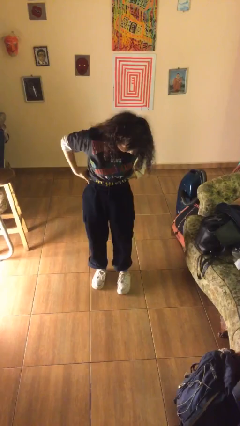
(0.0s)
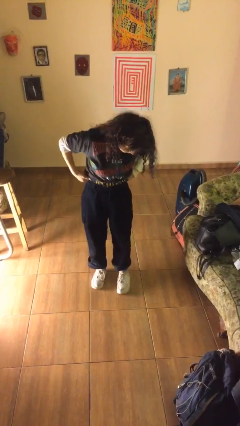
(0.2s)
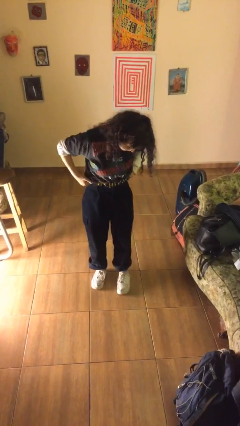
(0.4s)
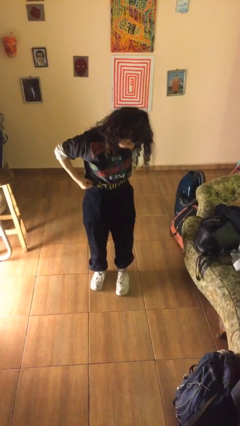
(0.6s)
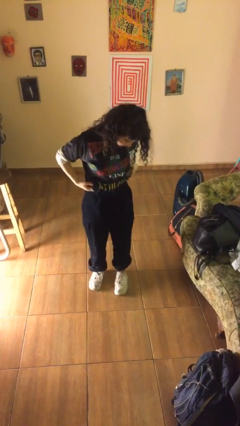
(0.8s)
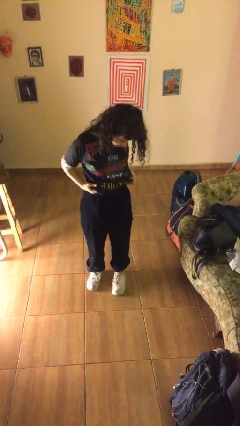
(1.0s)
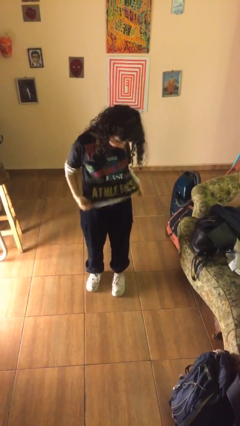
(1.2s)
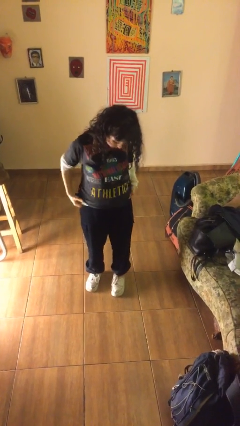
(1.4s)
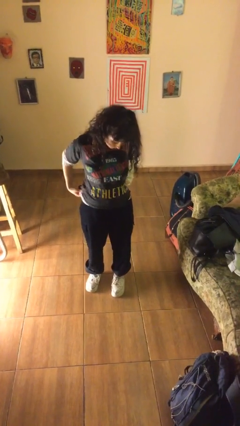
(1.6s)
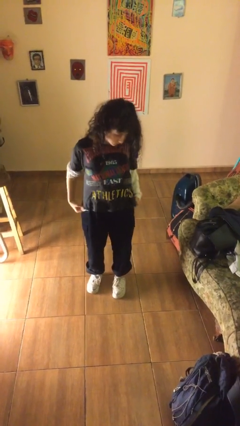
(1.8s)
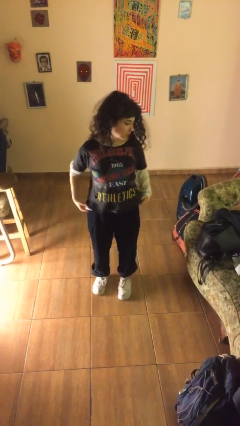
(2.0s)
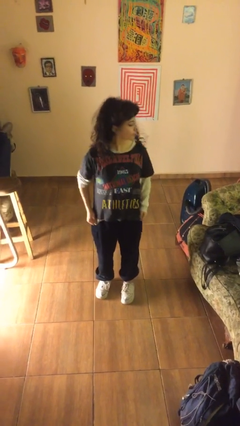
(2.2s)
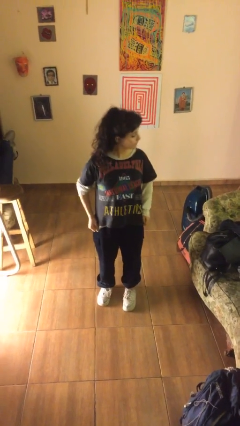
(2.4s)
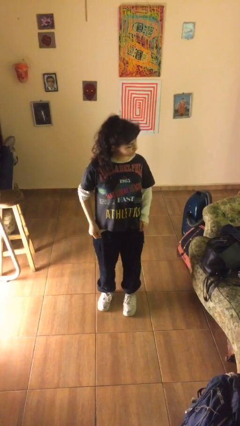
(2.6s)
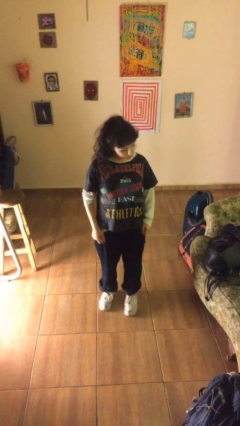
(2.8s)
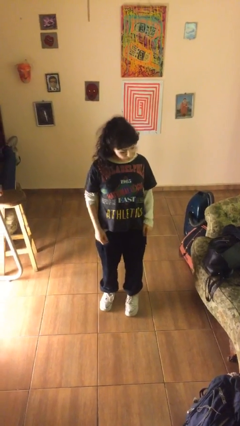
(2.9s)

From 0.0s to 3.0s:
person untucks shirt

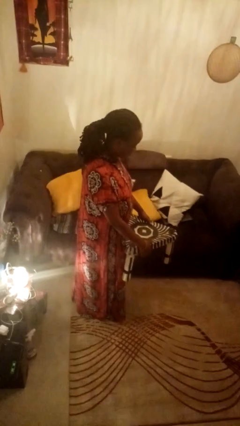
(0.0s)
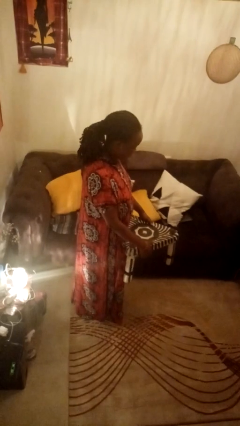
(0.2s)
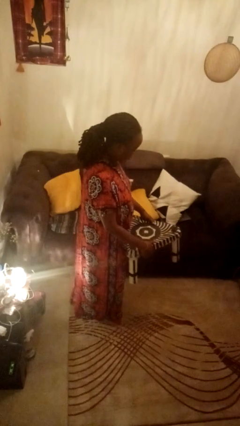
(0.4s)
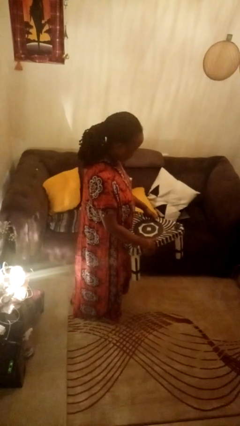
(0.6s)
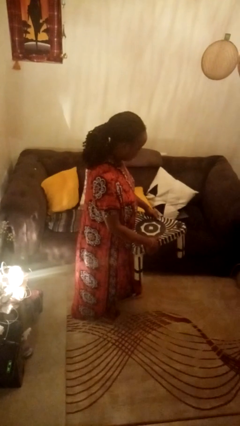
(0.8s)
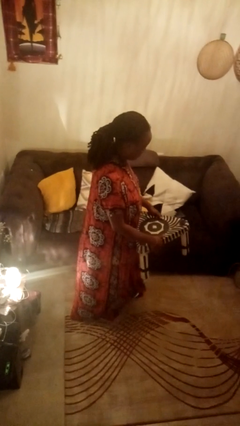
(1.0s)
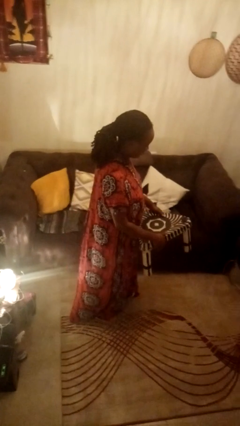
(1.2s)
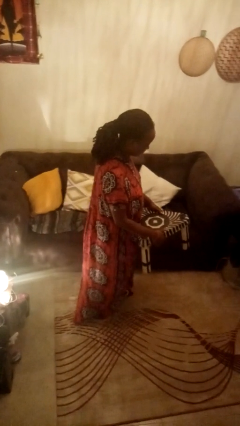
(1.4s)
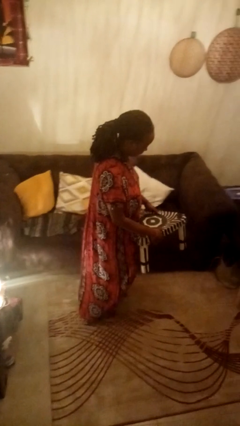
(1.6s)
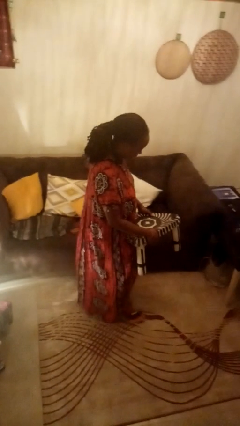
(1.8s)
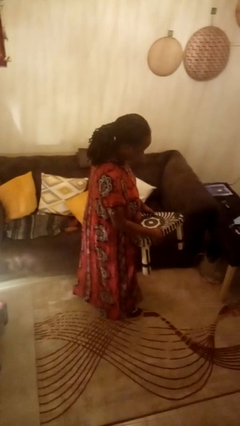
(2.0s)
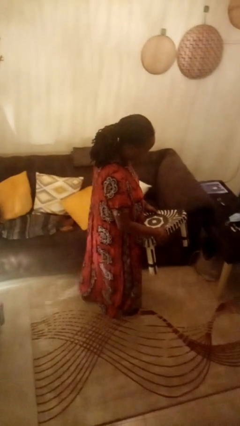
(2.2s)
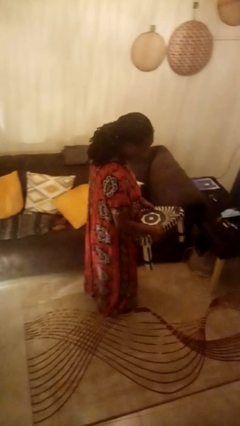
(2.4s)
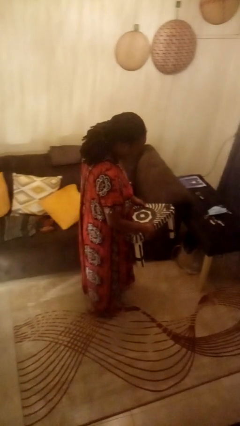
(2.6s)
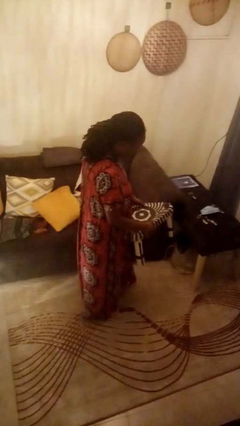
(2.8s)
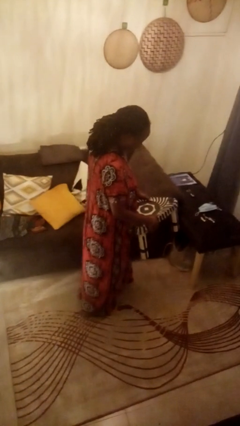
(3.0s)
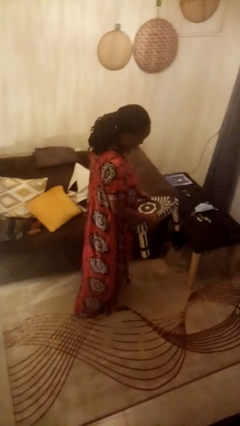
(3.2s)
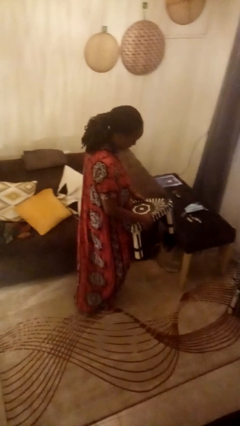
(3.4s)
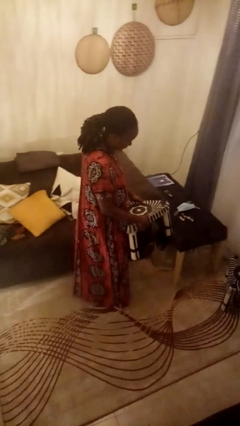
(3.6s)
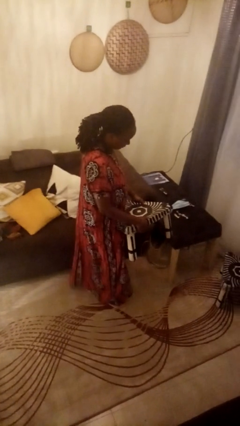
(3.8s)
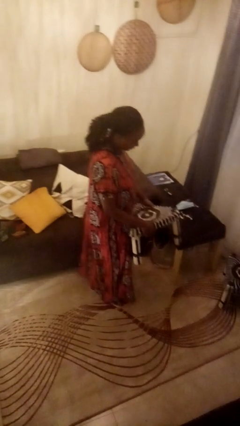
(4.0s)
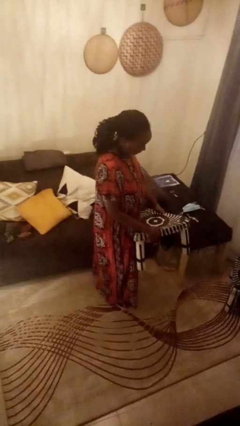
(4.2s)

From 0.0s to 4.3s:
person carries furniture

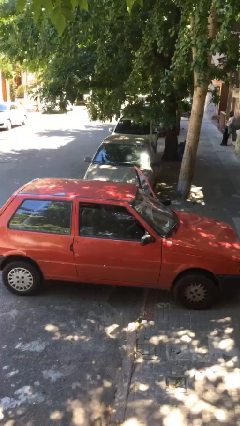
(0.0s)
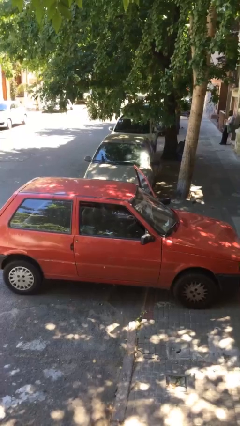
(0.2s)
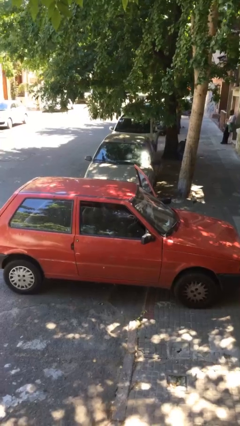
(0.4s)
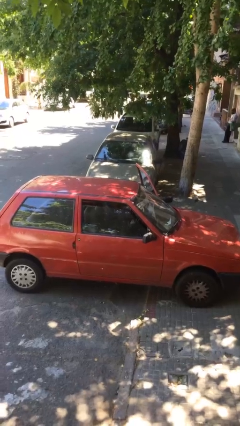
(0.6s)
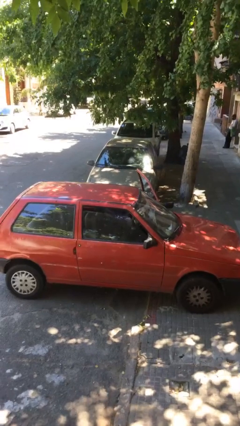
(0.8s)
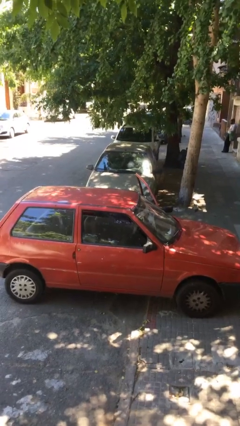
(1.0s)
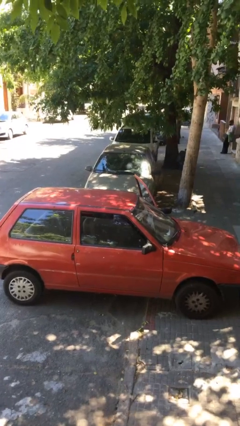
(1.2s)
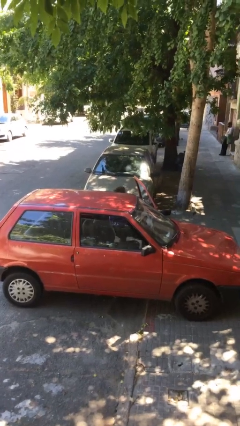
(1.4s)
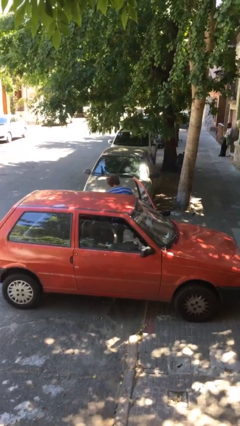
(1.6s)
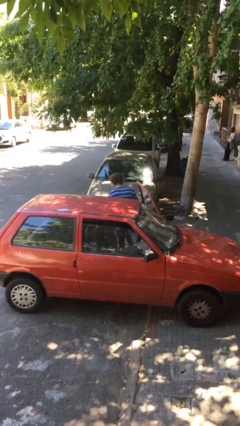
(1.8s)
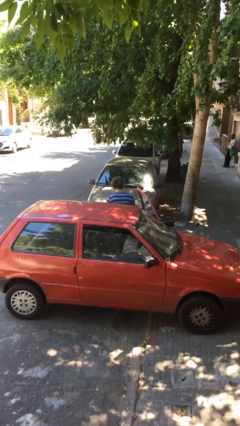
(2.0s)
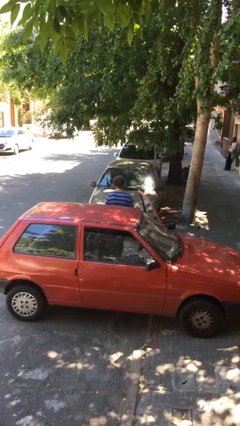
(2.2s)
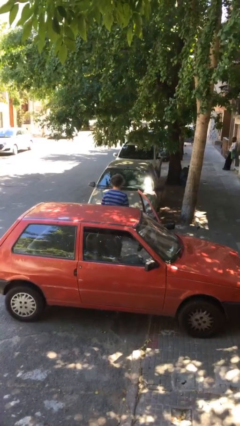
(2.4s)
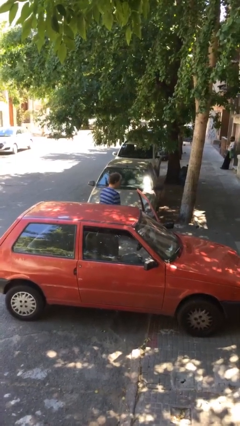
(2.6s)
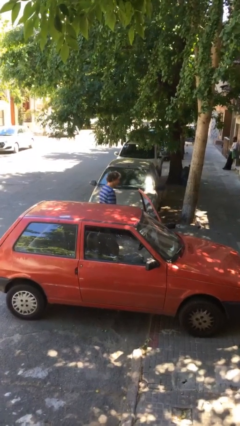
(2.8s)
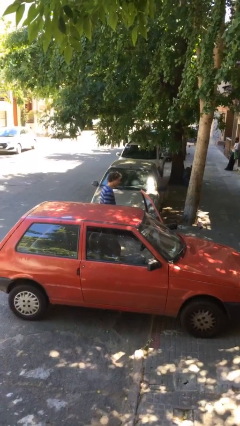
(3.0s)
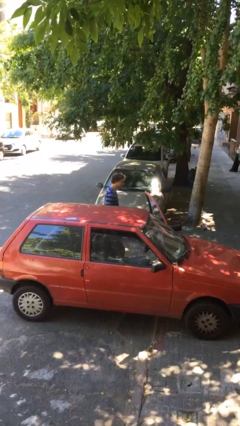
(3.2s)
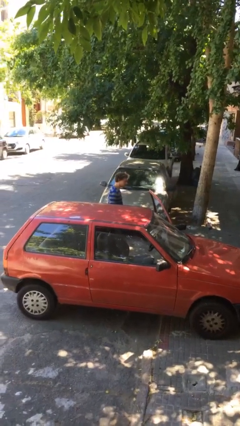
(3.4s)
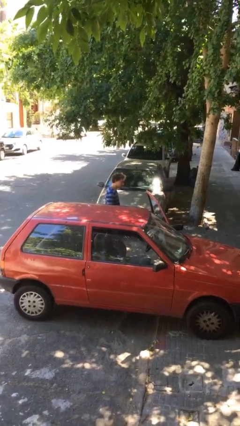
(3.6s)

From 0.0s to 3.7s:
person exits car

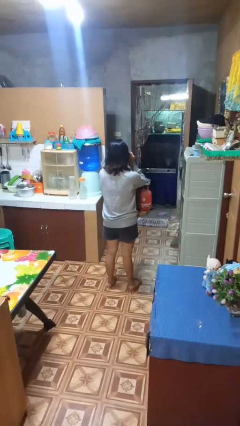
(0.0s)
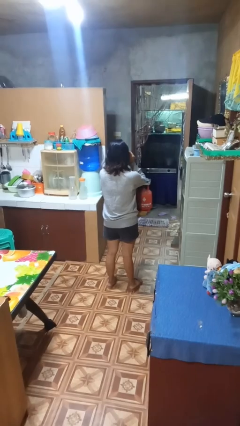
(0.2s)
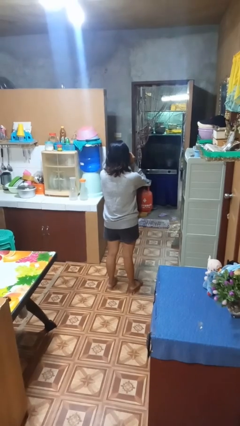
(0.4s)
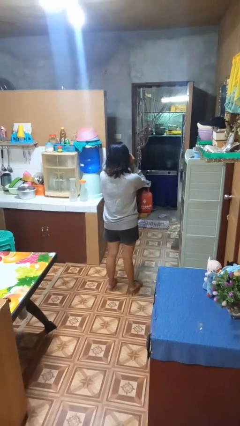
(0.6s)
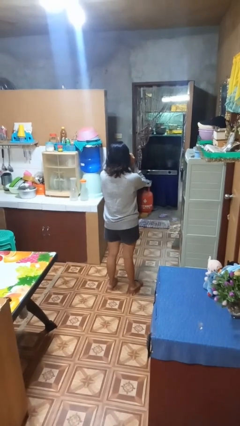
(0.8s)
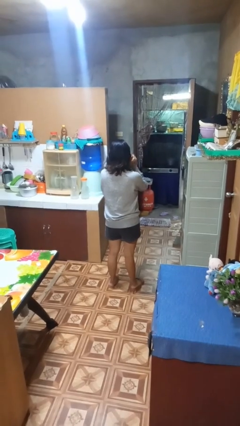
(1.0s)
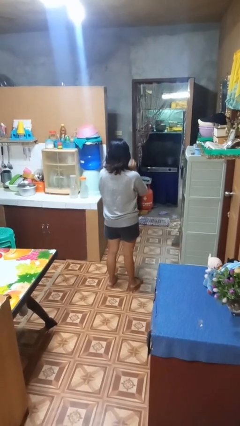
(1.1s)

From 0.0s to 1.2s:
person drinks from mug

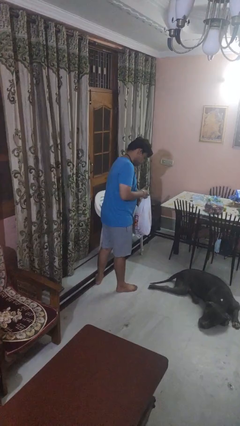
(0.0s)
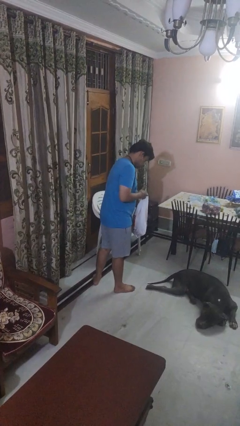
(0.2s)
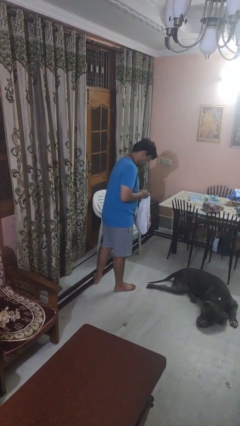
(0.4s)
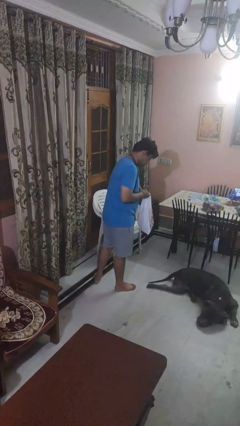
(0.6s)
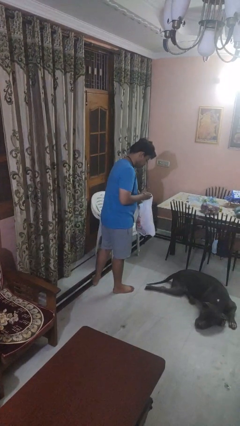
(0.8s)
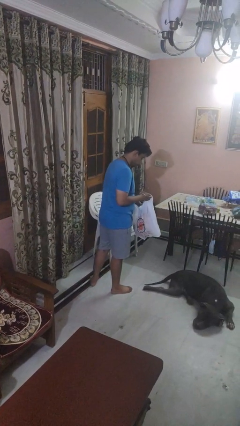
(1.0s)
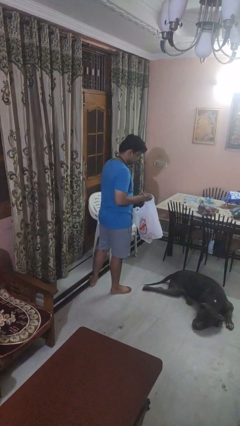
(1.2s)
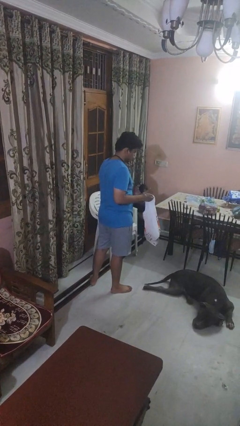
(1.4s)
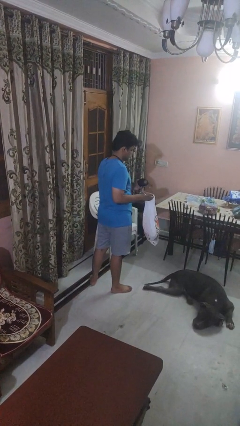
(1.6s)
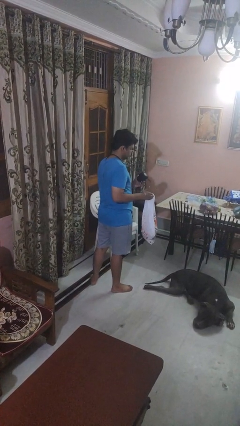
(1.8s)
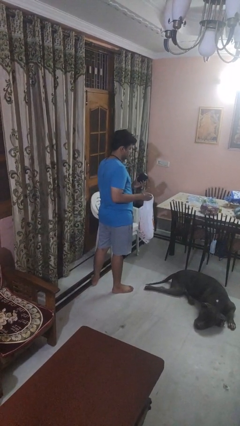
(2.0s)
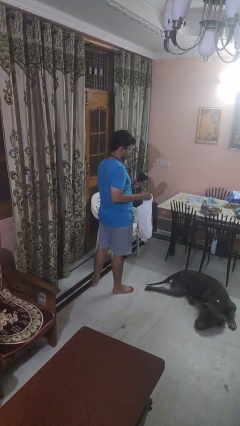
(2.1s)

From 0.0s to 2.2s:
person takes object from bag

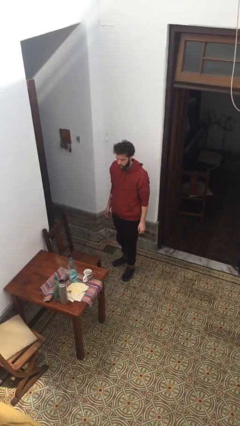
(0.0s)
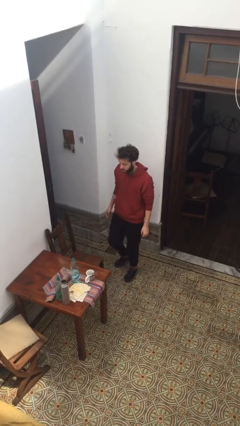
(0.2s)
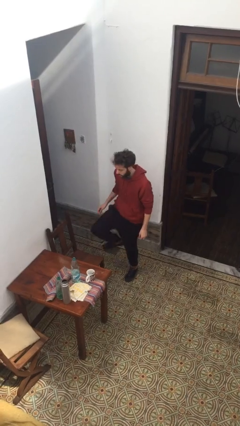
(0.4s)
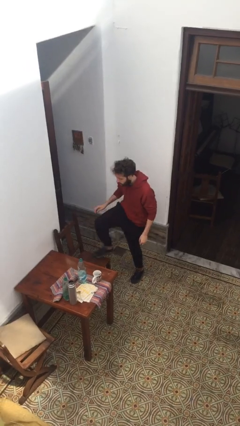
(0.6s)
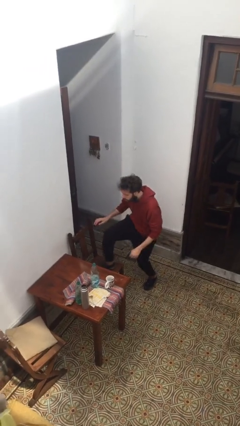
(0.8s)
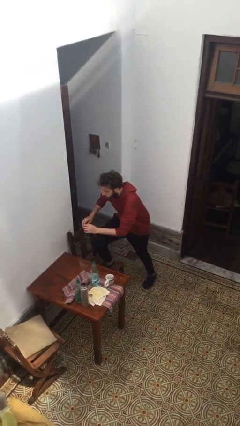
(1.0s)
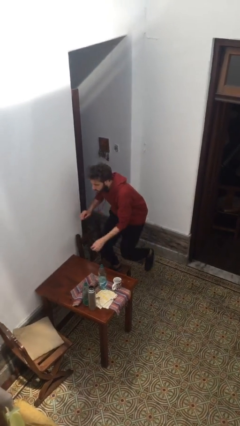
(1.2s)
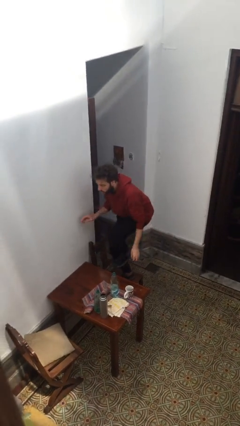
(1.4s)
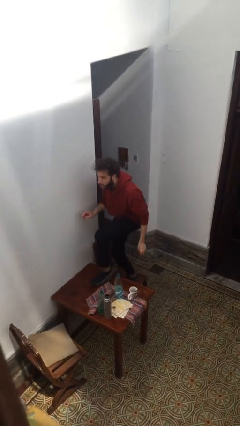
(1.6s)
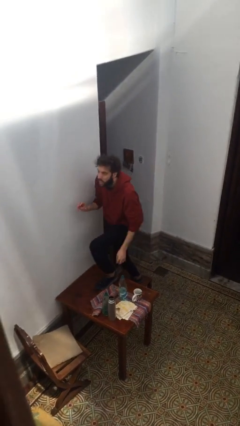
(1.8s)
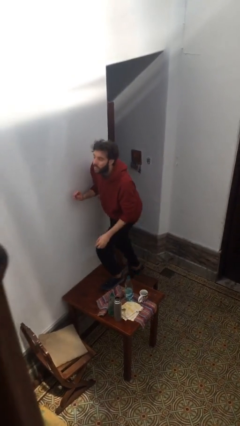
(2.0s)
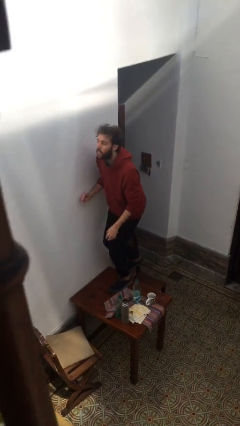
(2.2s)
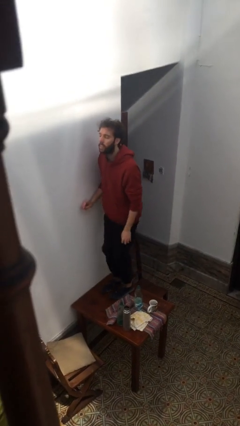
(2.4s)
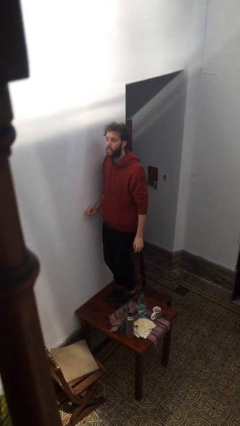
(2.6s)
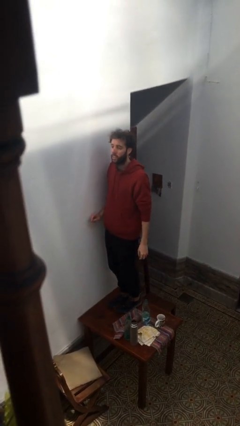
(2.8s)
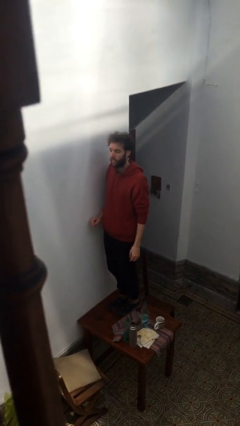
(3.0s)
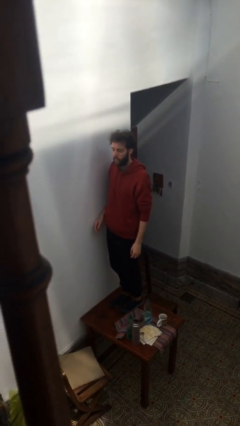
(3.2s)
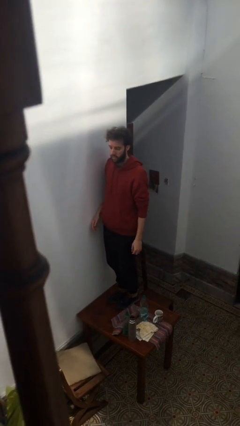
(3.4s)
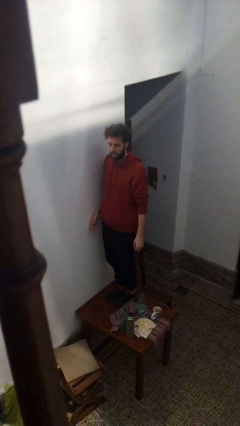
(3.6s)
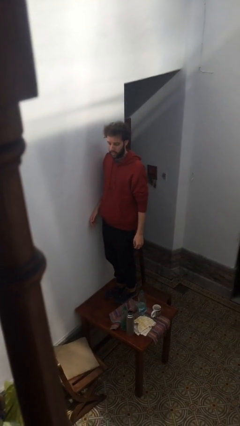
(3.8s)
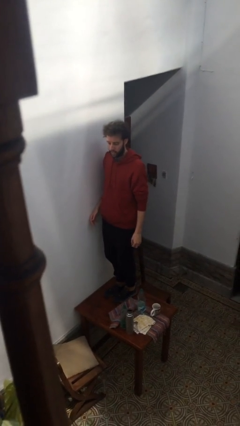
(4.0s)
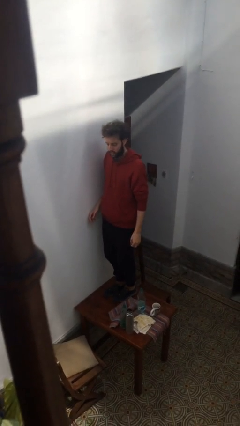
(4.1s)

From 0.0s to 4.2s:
person climbs on table
